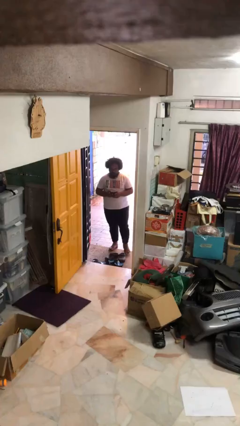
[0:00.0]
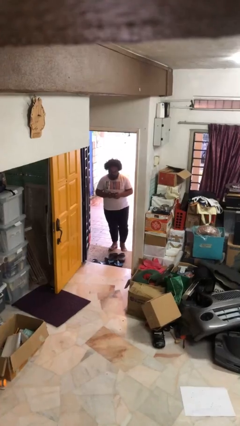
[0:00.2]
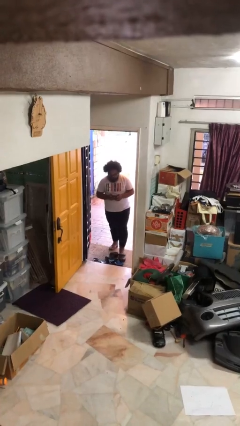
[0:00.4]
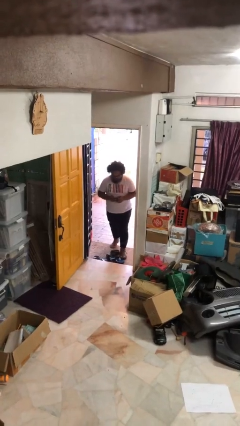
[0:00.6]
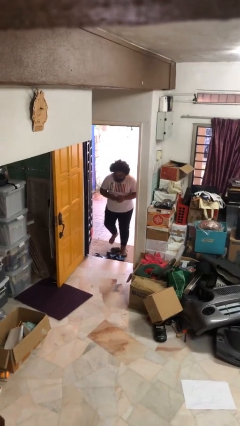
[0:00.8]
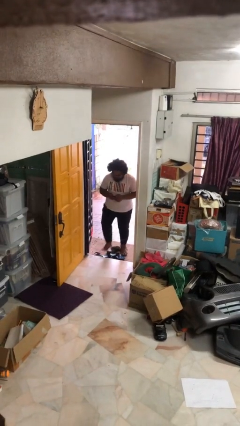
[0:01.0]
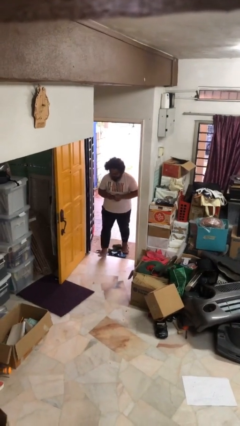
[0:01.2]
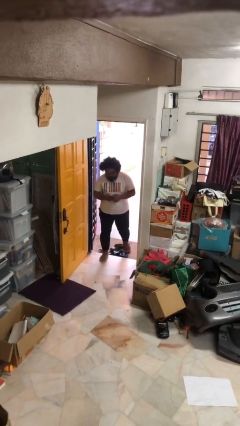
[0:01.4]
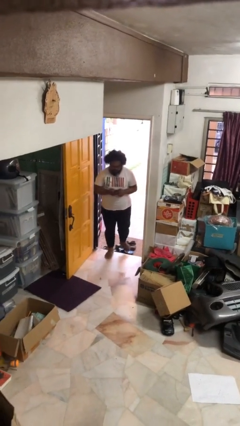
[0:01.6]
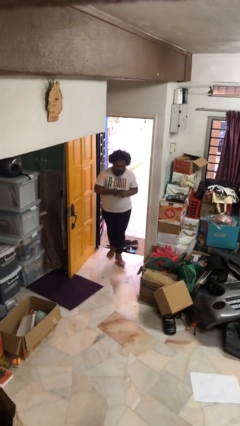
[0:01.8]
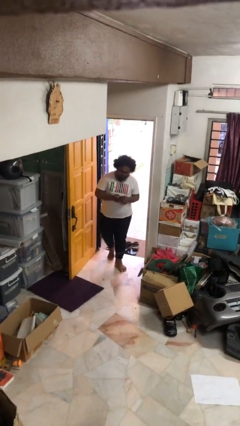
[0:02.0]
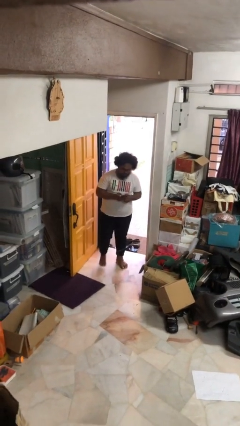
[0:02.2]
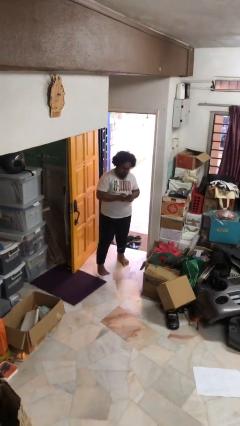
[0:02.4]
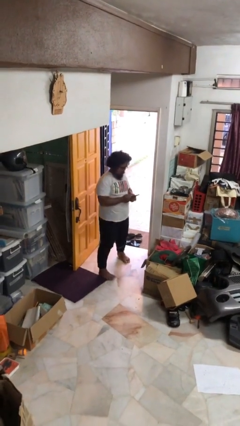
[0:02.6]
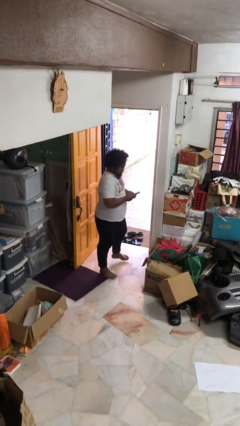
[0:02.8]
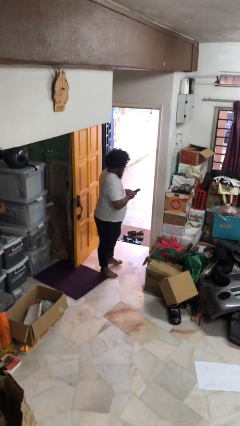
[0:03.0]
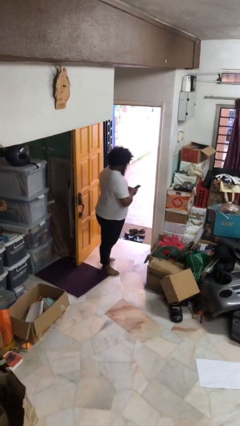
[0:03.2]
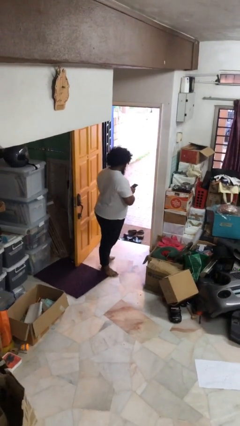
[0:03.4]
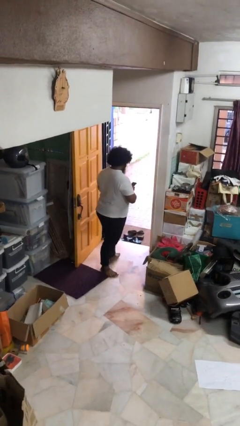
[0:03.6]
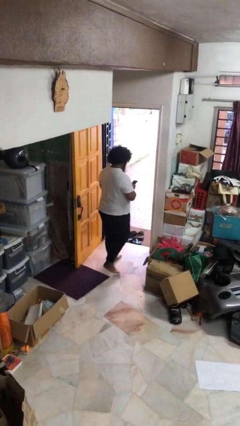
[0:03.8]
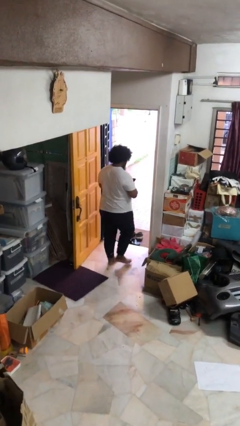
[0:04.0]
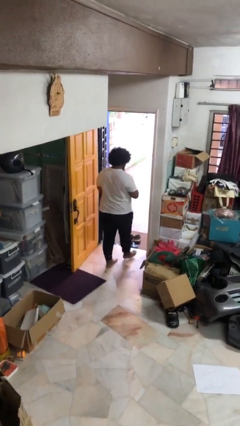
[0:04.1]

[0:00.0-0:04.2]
person enters scene through structure

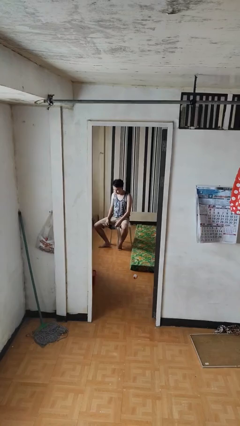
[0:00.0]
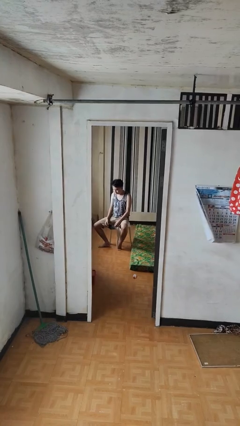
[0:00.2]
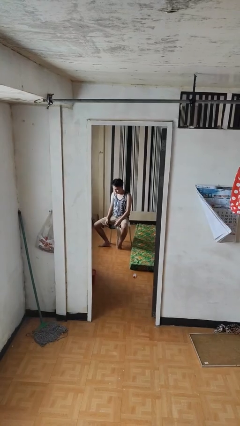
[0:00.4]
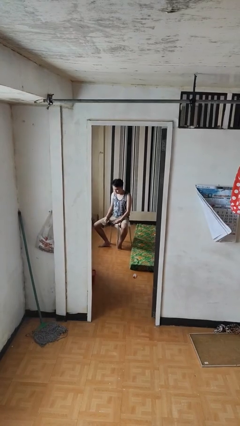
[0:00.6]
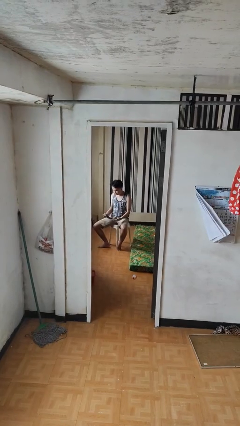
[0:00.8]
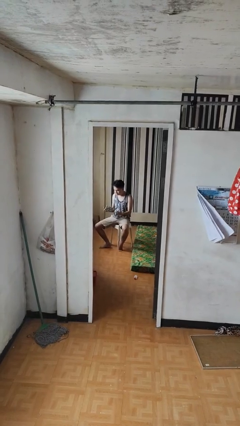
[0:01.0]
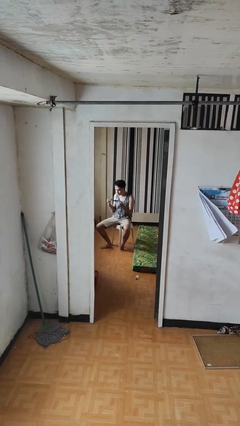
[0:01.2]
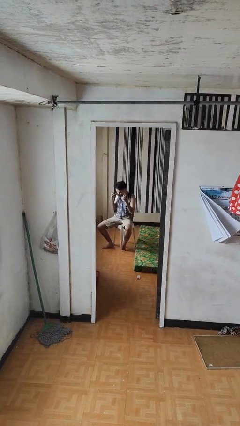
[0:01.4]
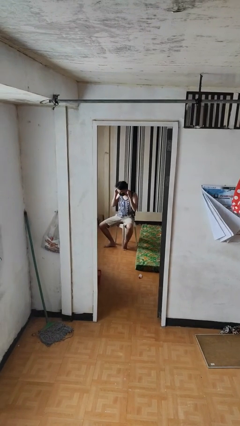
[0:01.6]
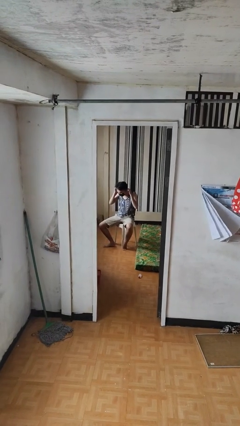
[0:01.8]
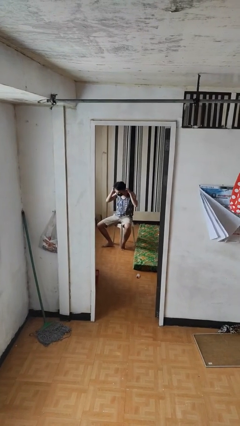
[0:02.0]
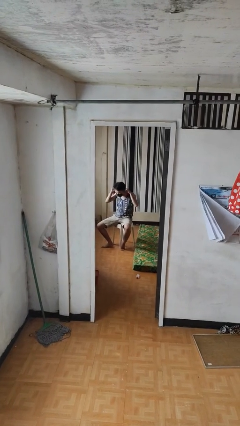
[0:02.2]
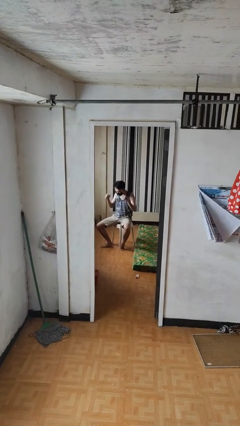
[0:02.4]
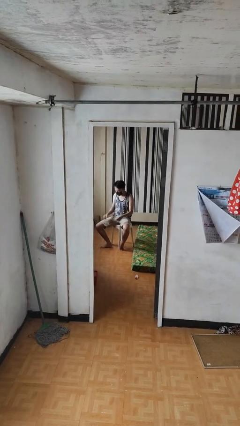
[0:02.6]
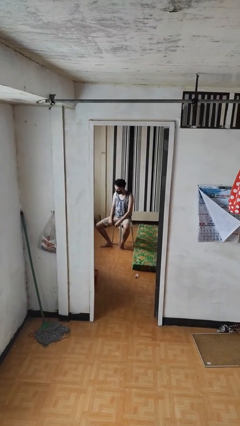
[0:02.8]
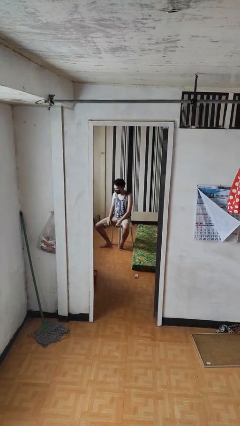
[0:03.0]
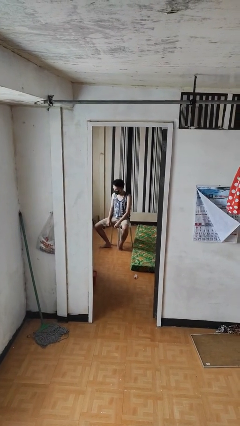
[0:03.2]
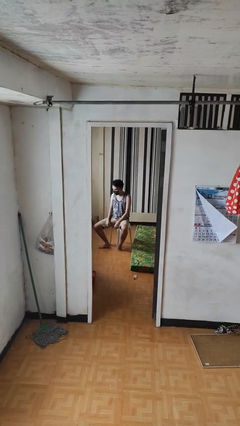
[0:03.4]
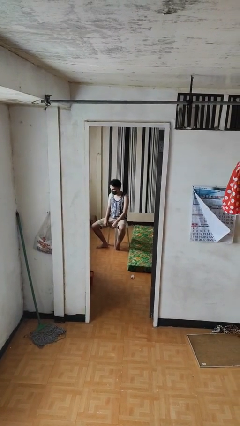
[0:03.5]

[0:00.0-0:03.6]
person puts on facemask

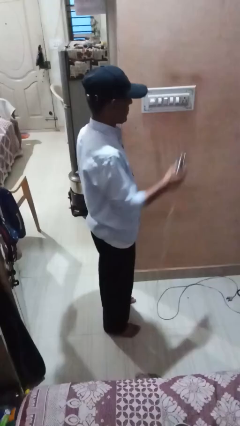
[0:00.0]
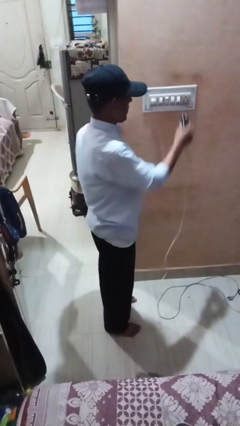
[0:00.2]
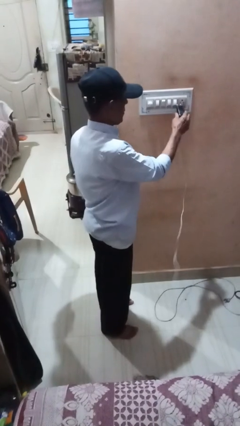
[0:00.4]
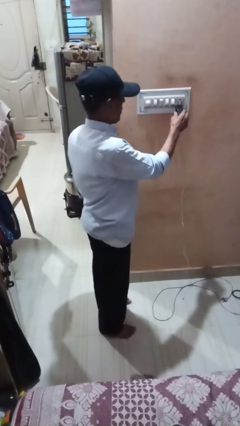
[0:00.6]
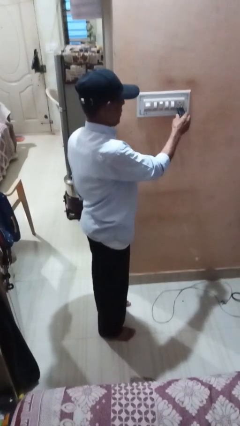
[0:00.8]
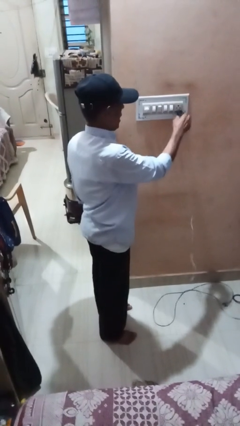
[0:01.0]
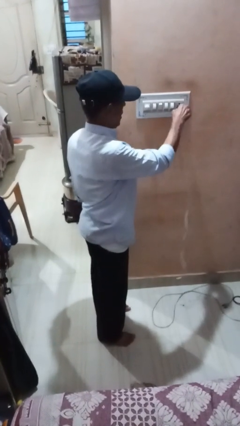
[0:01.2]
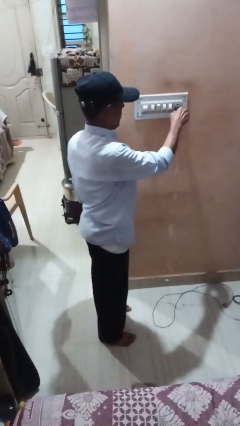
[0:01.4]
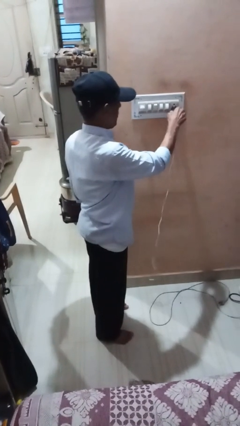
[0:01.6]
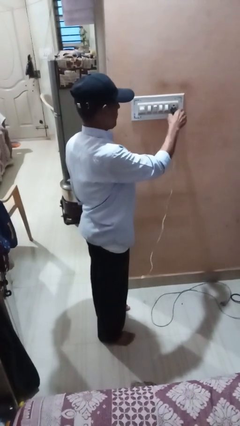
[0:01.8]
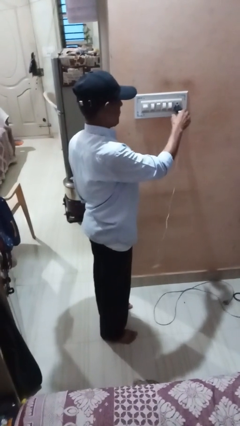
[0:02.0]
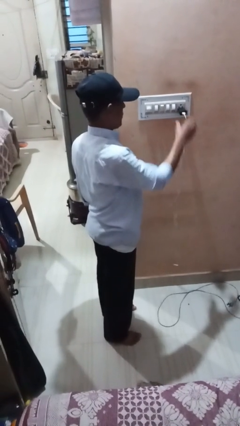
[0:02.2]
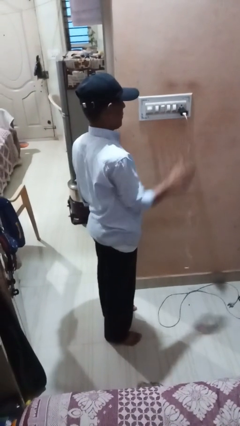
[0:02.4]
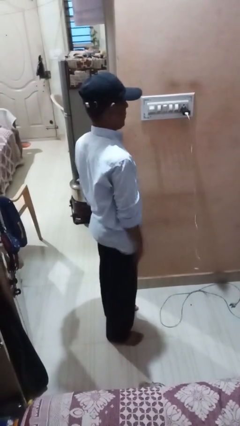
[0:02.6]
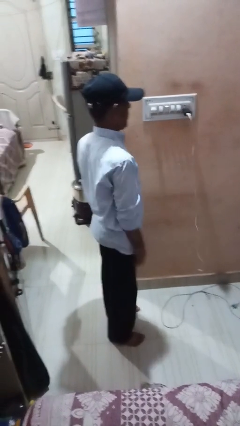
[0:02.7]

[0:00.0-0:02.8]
person plugs into electrical socket

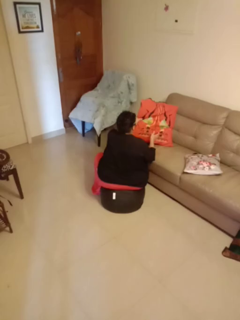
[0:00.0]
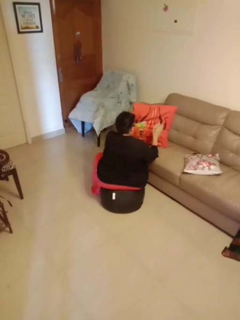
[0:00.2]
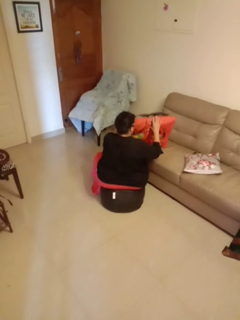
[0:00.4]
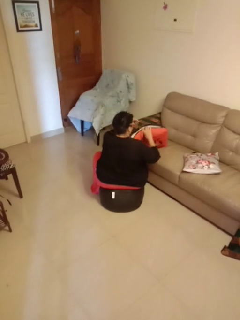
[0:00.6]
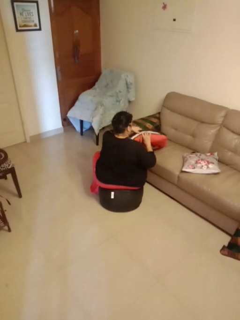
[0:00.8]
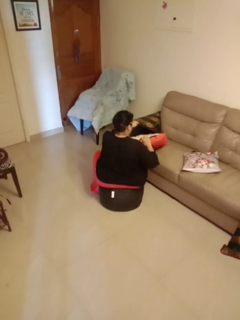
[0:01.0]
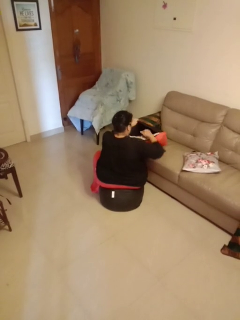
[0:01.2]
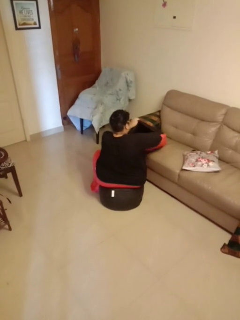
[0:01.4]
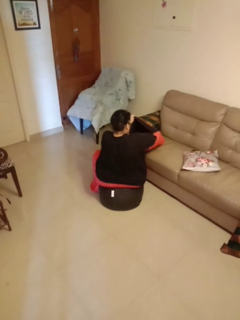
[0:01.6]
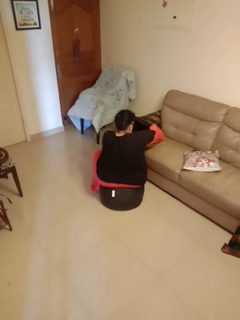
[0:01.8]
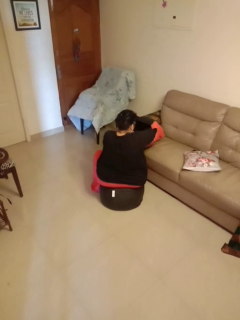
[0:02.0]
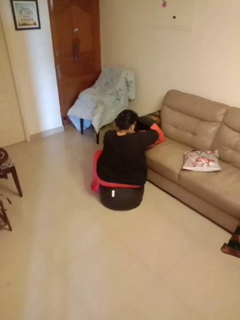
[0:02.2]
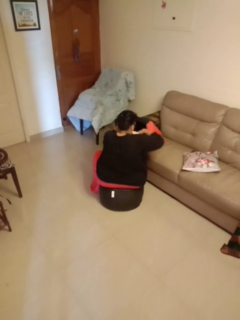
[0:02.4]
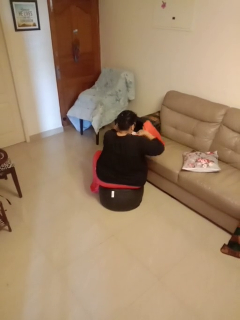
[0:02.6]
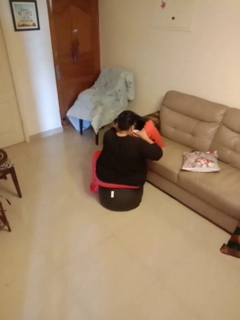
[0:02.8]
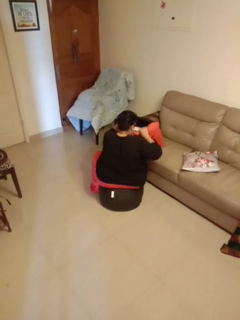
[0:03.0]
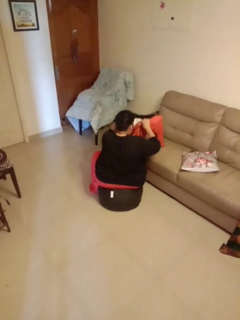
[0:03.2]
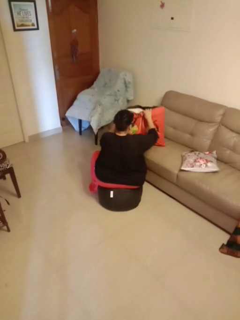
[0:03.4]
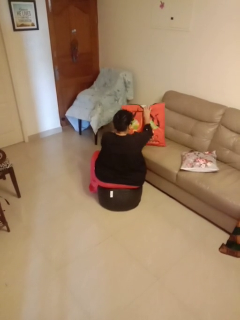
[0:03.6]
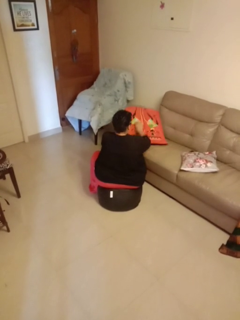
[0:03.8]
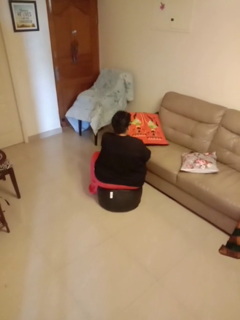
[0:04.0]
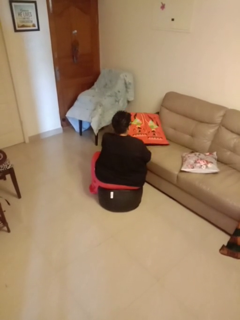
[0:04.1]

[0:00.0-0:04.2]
person searches in couch

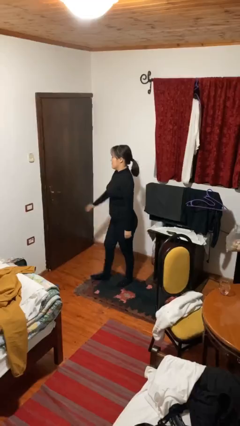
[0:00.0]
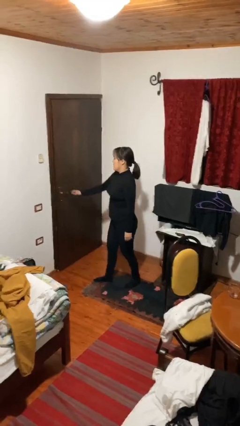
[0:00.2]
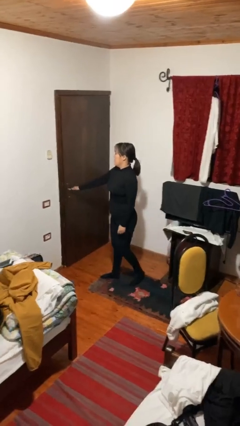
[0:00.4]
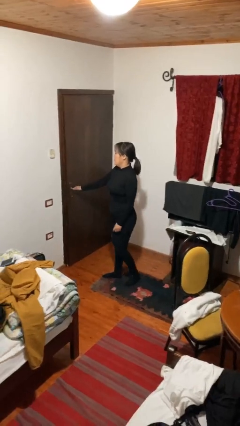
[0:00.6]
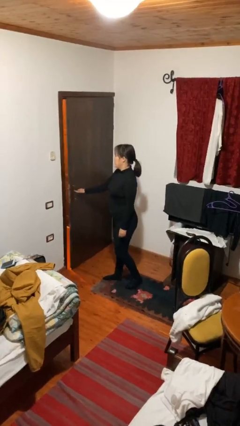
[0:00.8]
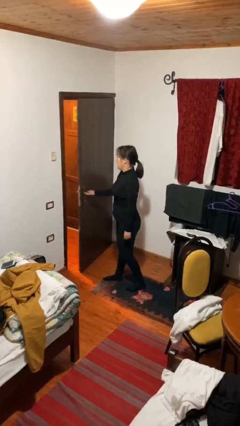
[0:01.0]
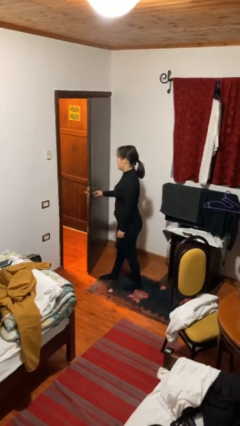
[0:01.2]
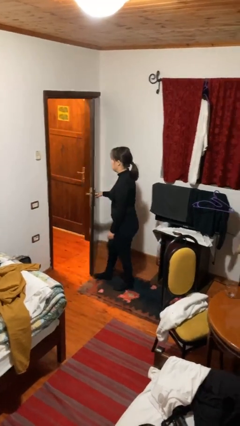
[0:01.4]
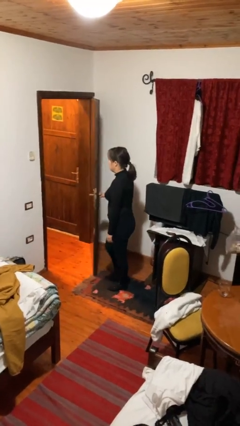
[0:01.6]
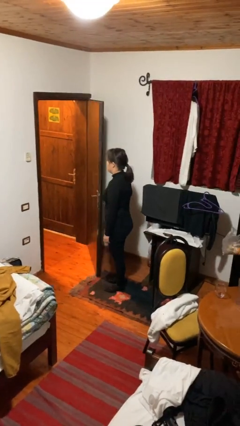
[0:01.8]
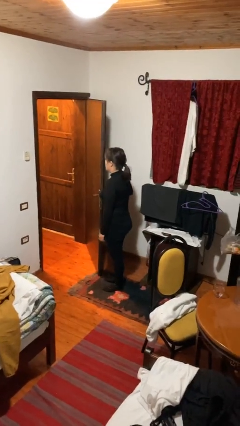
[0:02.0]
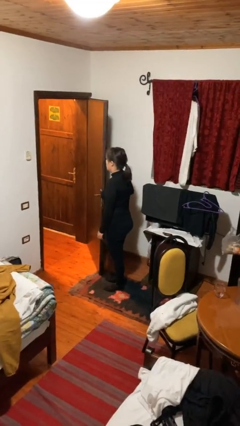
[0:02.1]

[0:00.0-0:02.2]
person opens facility door

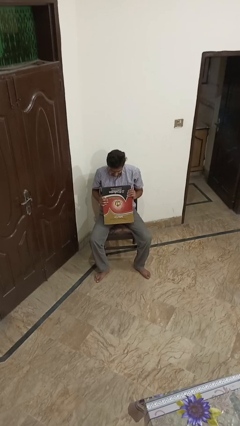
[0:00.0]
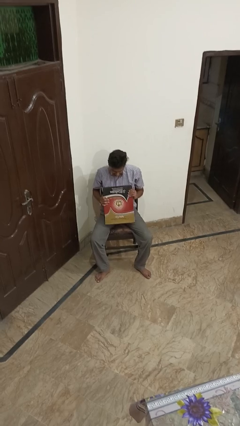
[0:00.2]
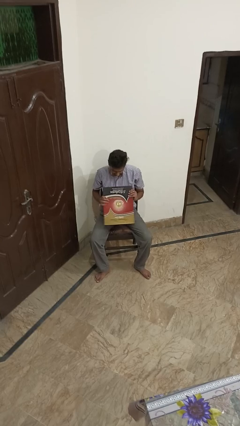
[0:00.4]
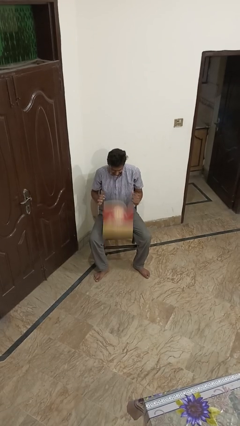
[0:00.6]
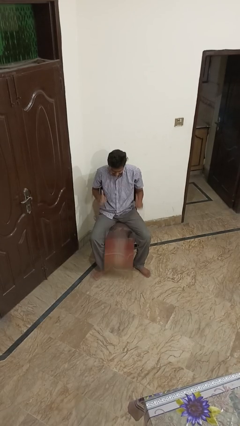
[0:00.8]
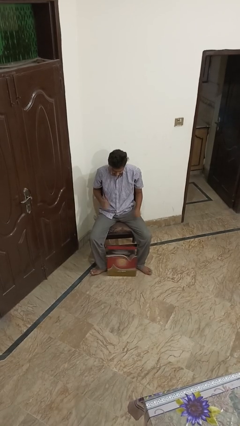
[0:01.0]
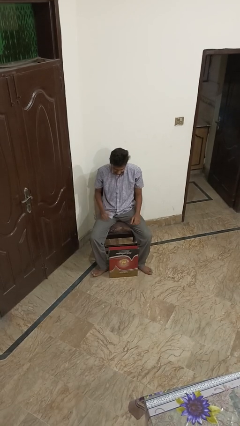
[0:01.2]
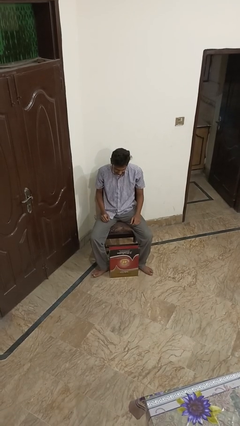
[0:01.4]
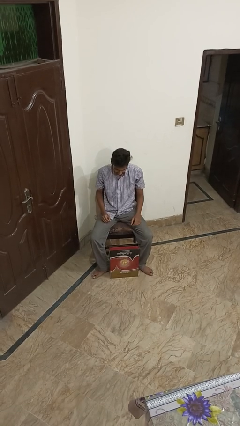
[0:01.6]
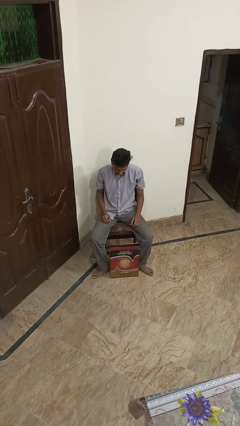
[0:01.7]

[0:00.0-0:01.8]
person drops object
